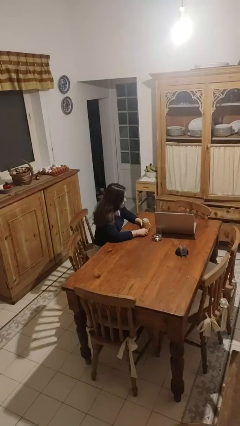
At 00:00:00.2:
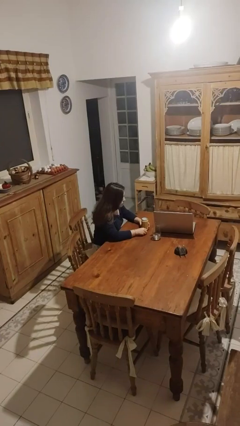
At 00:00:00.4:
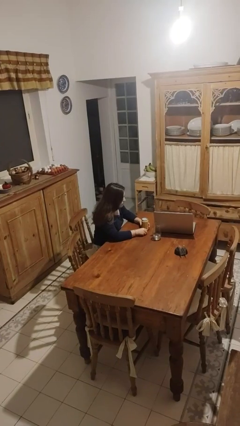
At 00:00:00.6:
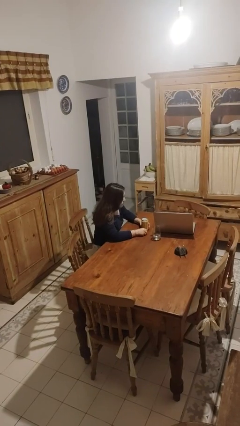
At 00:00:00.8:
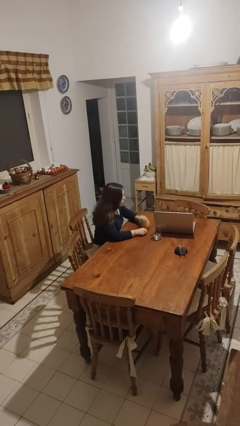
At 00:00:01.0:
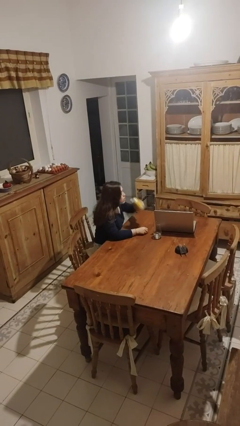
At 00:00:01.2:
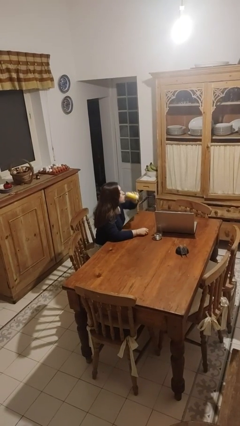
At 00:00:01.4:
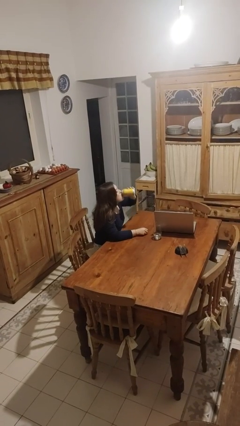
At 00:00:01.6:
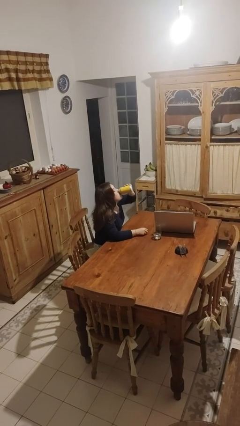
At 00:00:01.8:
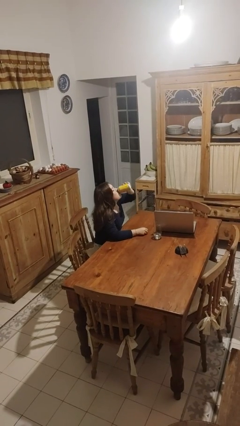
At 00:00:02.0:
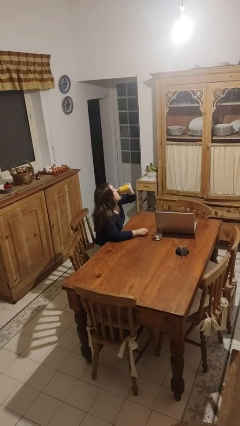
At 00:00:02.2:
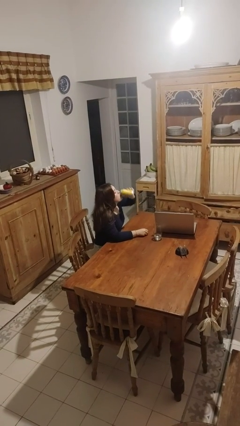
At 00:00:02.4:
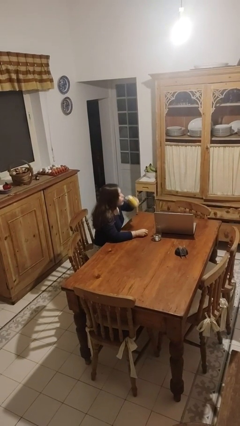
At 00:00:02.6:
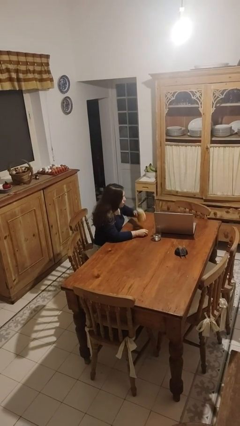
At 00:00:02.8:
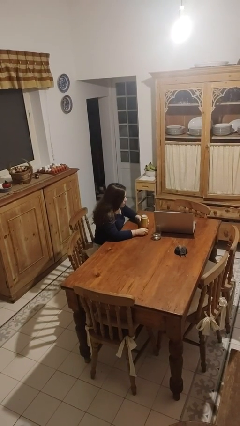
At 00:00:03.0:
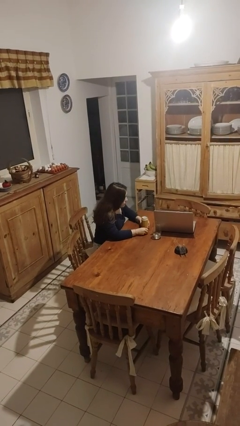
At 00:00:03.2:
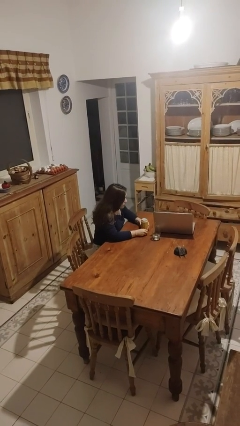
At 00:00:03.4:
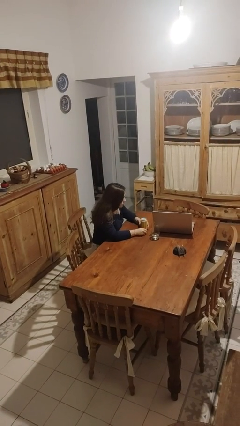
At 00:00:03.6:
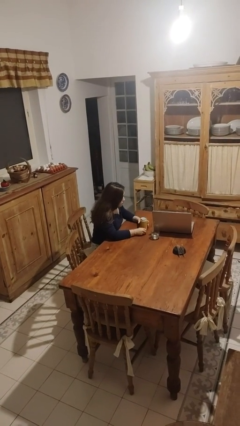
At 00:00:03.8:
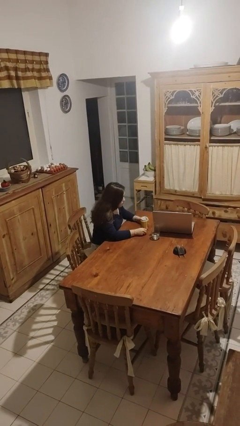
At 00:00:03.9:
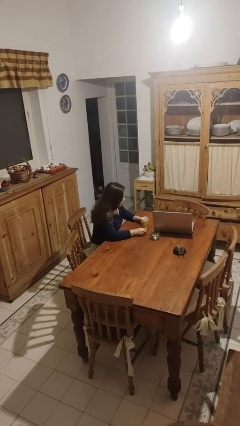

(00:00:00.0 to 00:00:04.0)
person drinks from beverage can

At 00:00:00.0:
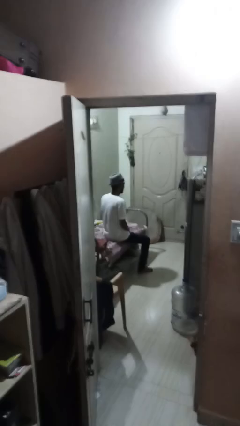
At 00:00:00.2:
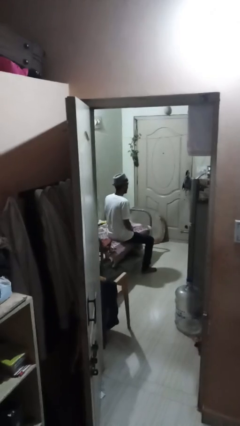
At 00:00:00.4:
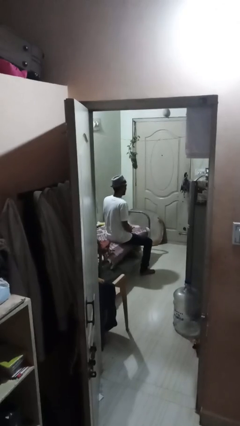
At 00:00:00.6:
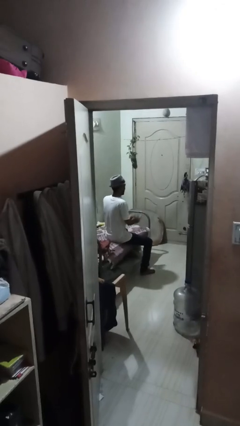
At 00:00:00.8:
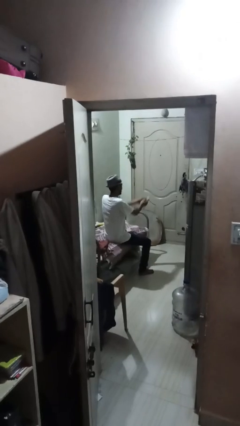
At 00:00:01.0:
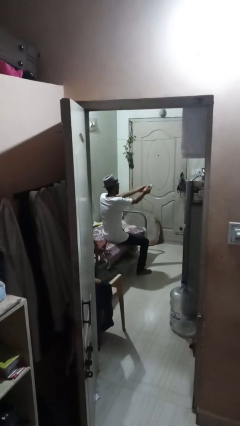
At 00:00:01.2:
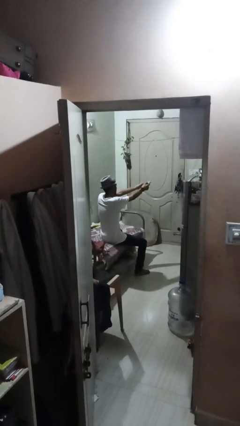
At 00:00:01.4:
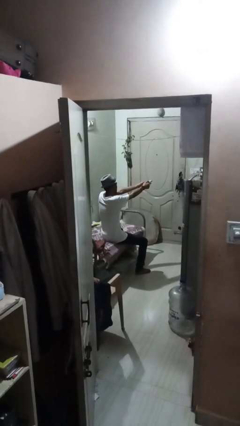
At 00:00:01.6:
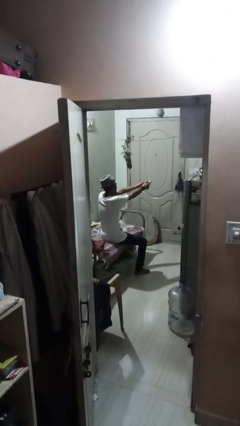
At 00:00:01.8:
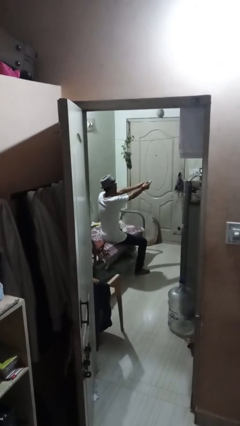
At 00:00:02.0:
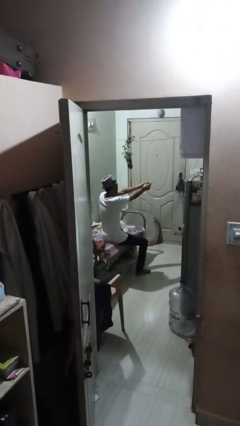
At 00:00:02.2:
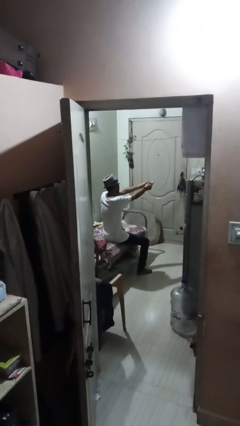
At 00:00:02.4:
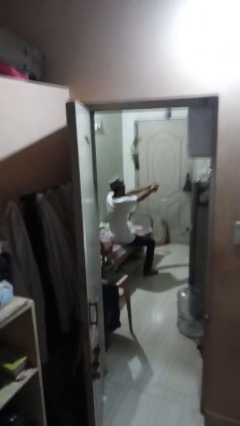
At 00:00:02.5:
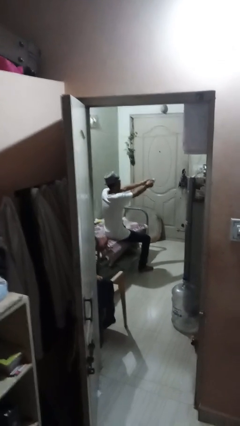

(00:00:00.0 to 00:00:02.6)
person uses television remote

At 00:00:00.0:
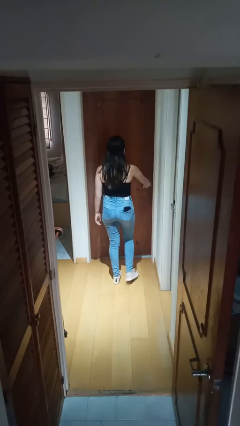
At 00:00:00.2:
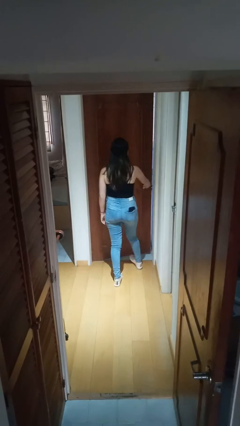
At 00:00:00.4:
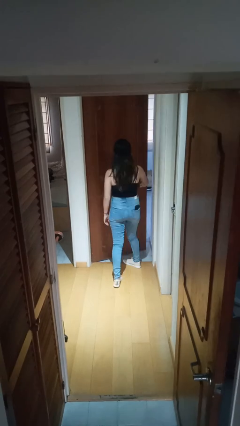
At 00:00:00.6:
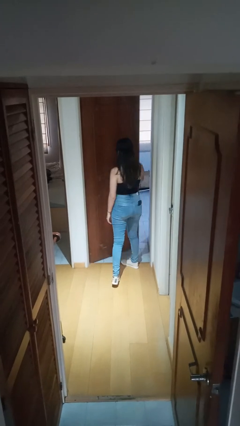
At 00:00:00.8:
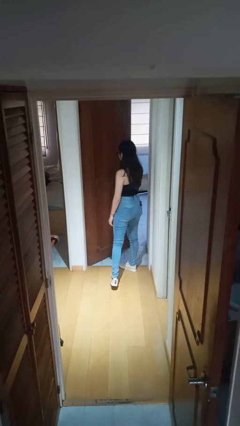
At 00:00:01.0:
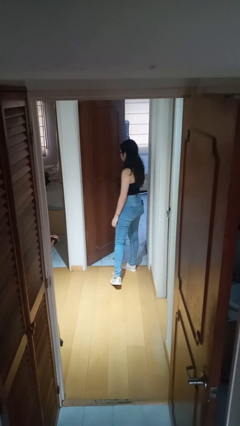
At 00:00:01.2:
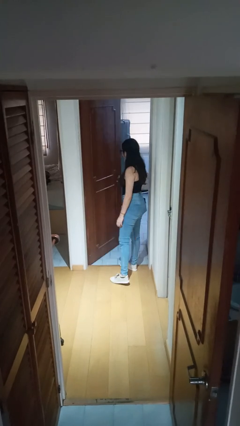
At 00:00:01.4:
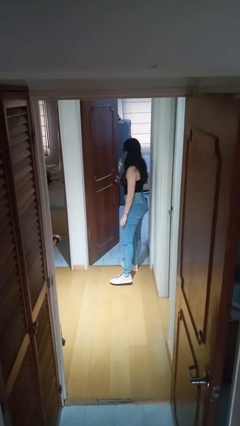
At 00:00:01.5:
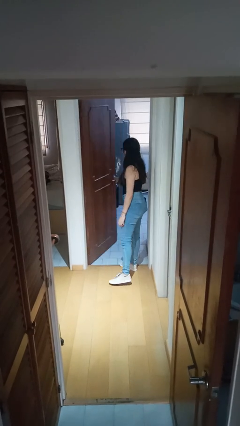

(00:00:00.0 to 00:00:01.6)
person opens facility door

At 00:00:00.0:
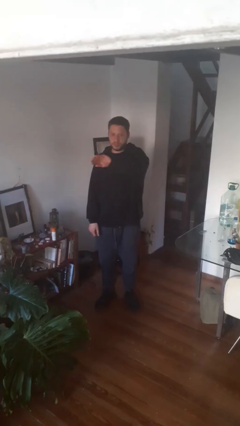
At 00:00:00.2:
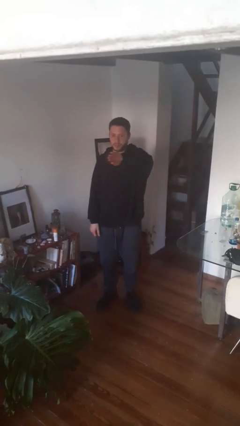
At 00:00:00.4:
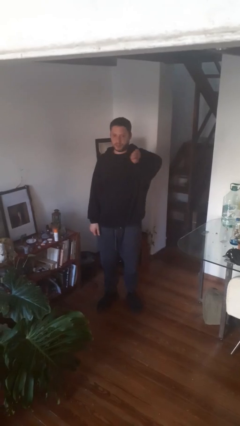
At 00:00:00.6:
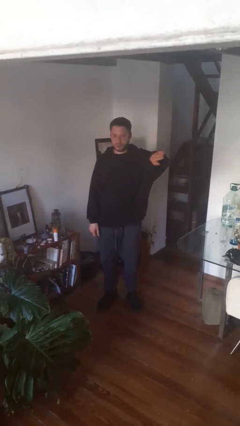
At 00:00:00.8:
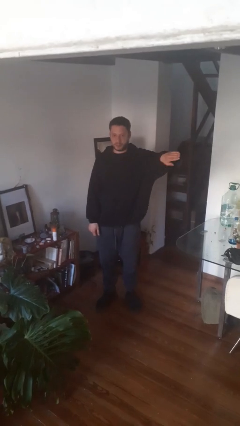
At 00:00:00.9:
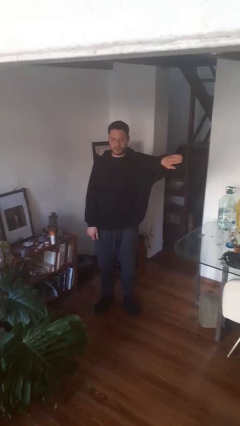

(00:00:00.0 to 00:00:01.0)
person gestures swipe left

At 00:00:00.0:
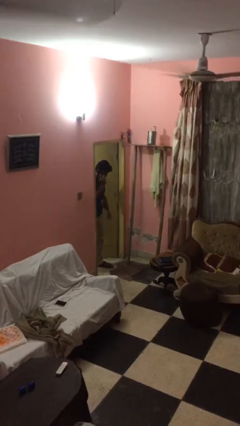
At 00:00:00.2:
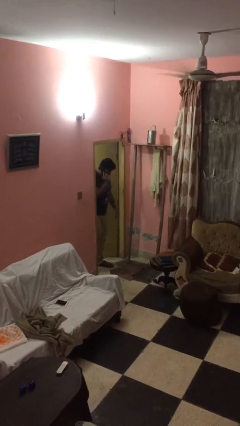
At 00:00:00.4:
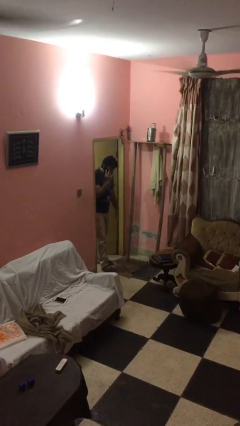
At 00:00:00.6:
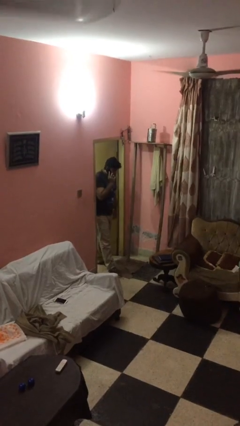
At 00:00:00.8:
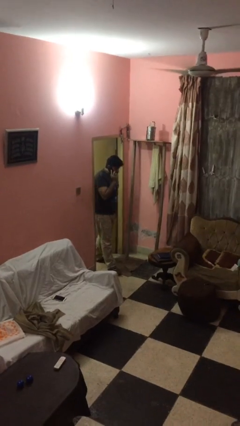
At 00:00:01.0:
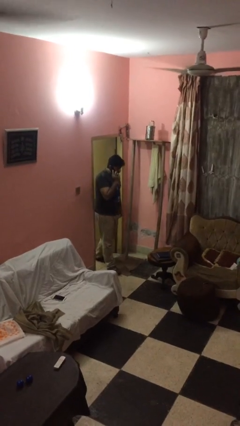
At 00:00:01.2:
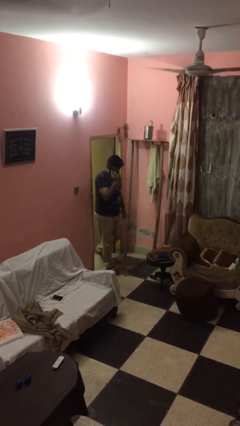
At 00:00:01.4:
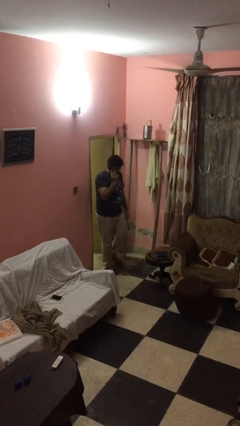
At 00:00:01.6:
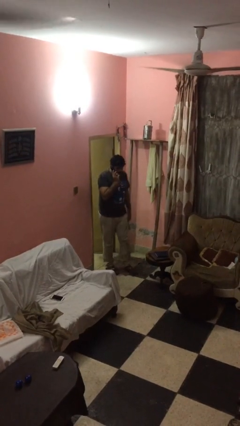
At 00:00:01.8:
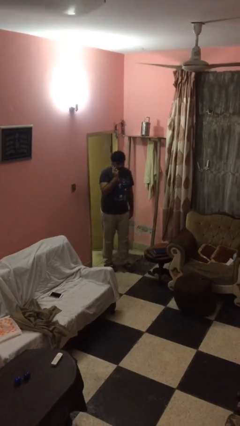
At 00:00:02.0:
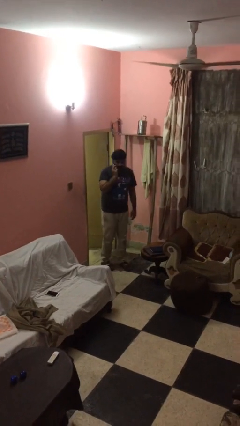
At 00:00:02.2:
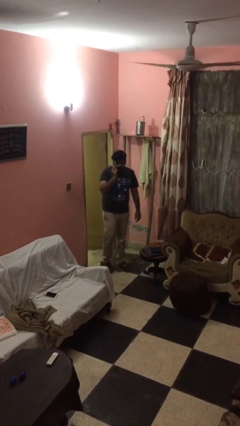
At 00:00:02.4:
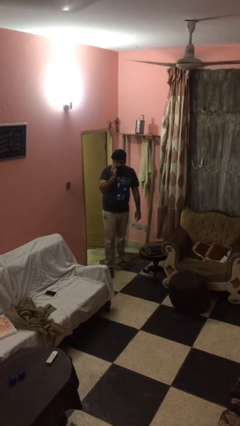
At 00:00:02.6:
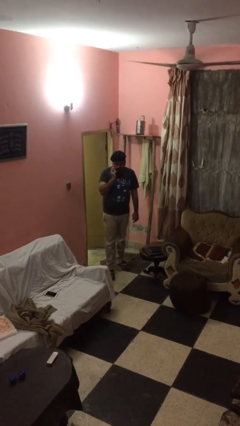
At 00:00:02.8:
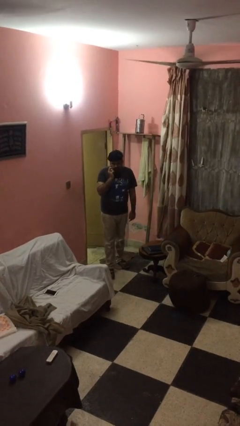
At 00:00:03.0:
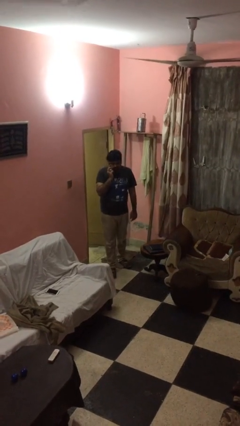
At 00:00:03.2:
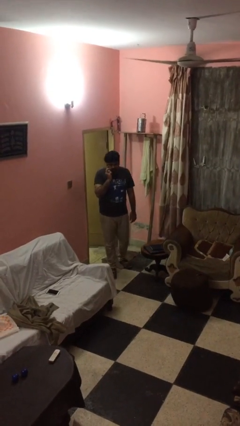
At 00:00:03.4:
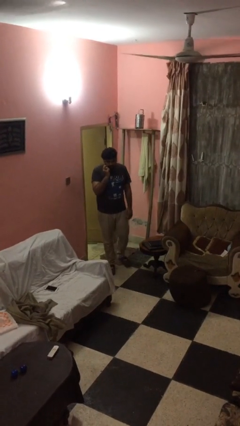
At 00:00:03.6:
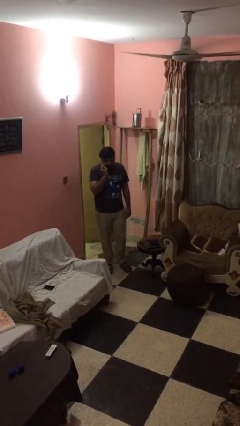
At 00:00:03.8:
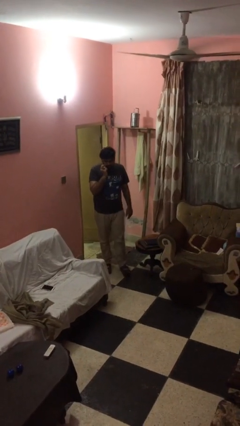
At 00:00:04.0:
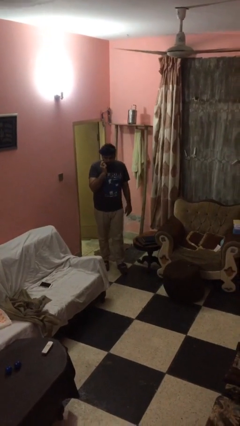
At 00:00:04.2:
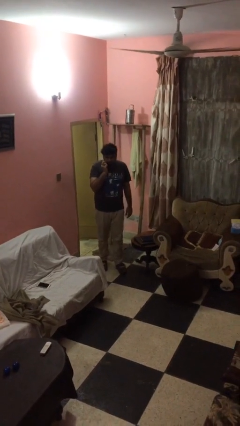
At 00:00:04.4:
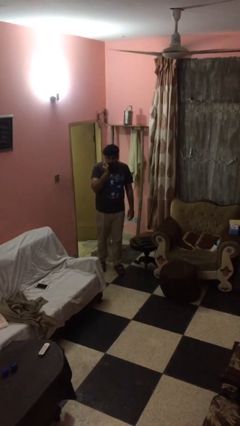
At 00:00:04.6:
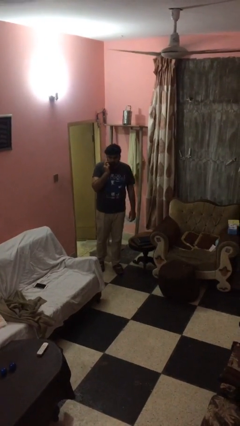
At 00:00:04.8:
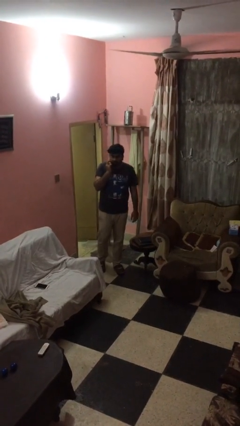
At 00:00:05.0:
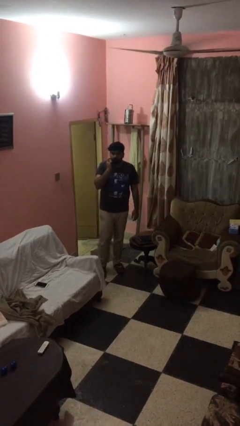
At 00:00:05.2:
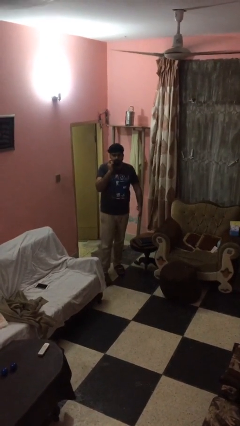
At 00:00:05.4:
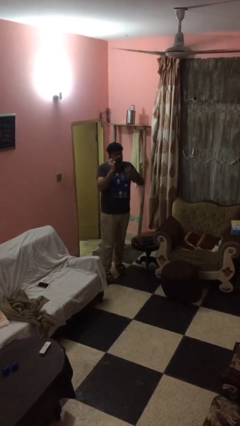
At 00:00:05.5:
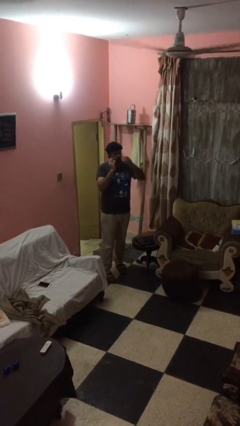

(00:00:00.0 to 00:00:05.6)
person enters scene through structure

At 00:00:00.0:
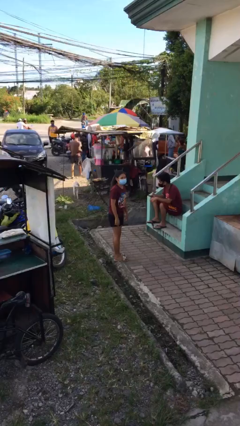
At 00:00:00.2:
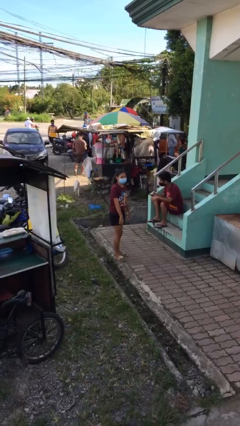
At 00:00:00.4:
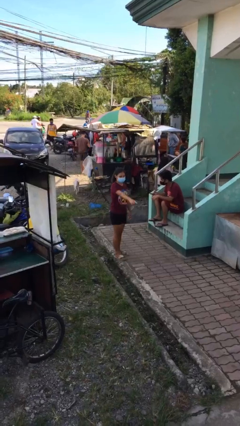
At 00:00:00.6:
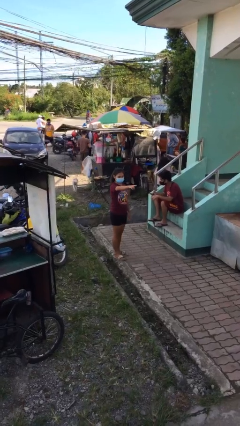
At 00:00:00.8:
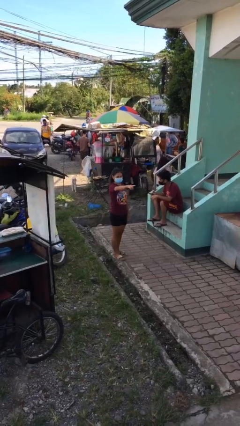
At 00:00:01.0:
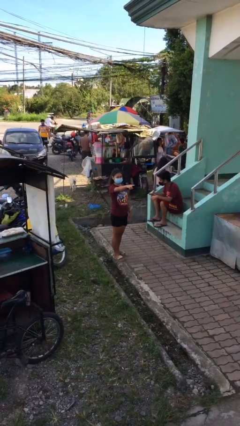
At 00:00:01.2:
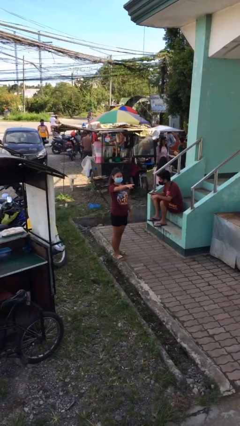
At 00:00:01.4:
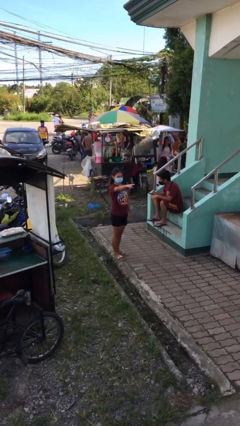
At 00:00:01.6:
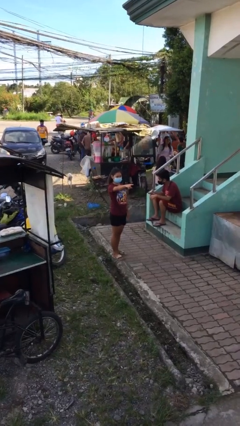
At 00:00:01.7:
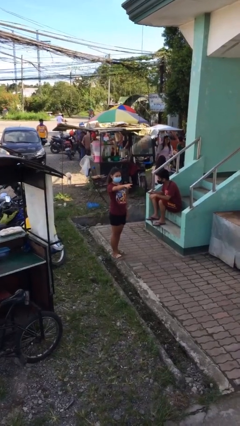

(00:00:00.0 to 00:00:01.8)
person points at person

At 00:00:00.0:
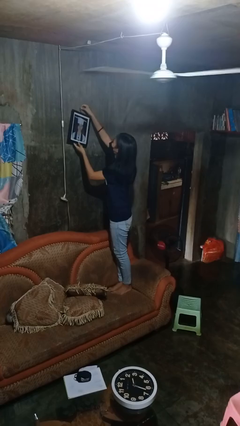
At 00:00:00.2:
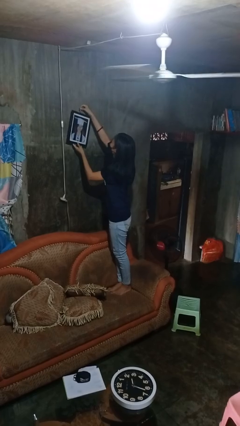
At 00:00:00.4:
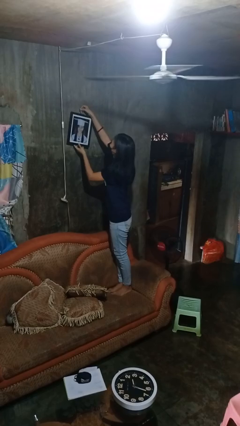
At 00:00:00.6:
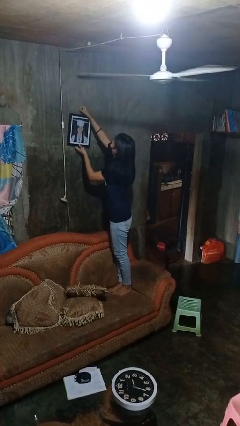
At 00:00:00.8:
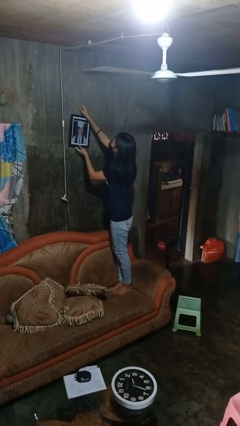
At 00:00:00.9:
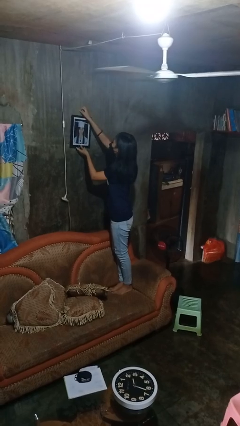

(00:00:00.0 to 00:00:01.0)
person puts up picture frame
